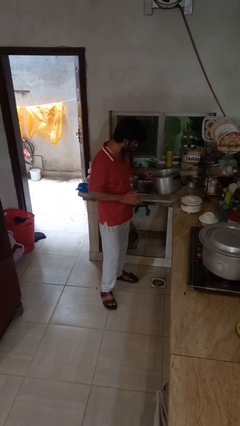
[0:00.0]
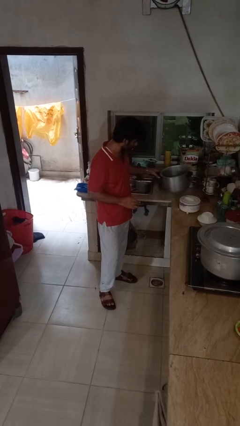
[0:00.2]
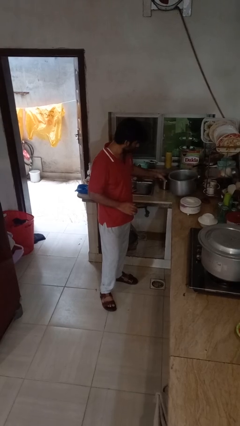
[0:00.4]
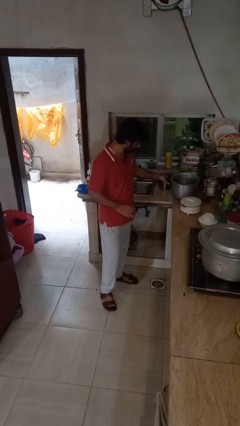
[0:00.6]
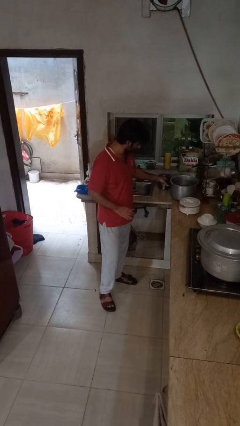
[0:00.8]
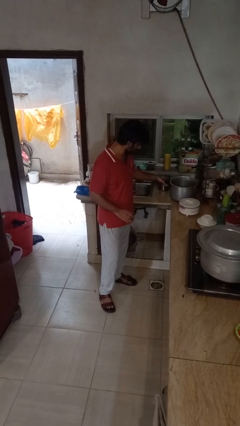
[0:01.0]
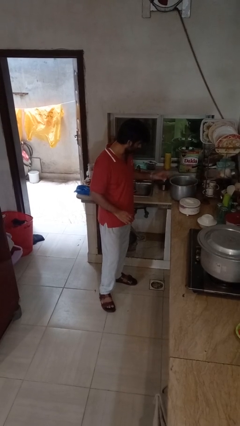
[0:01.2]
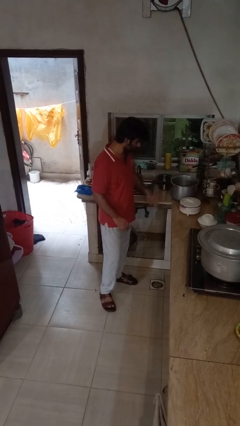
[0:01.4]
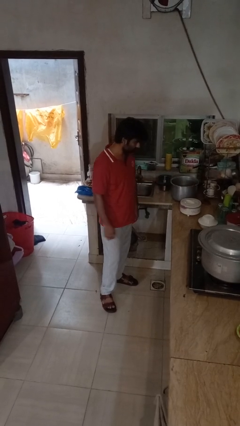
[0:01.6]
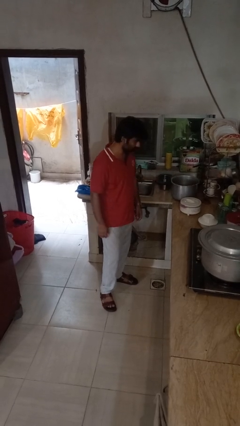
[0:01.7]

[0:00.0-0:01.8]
person puts down object on countertop

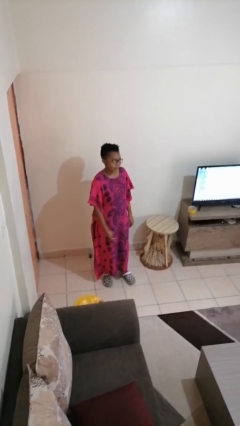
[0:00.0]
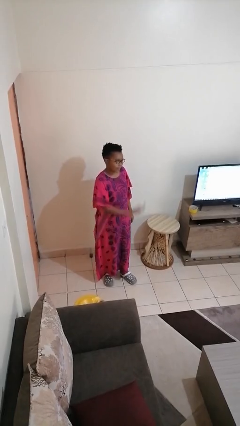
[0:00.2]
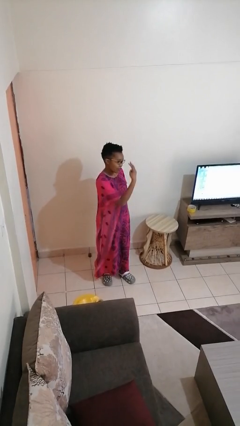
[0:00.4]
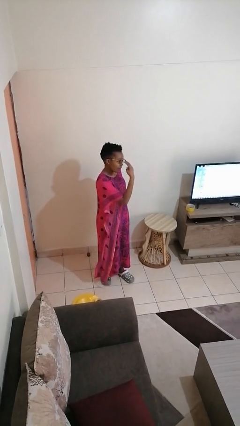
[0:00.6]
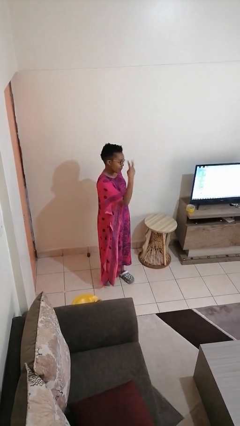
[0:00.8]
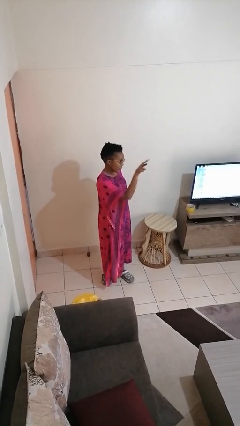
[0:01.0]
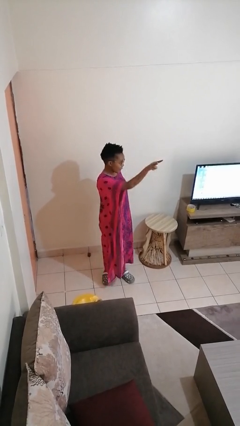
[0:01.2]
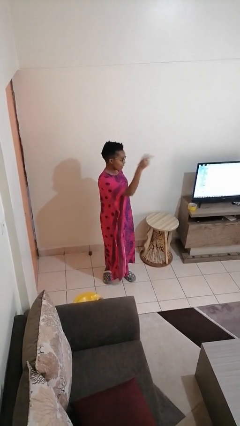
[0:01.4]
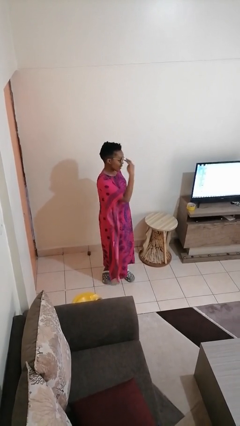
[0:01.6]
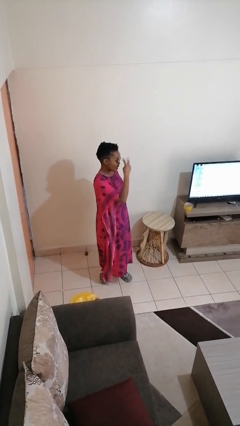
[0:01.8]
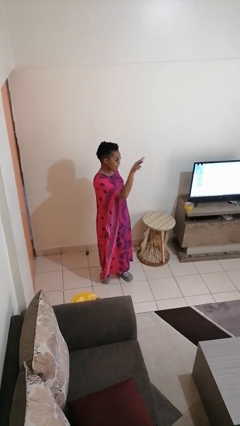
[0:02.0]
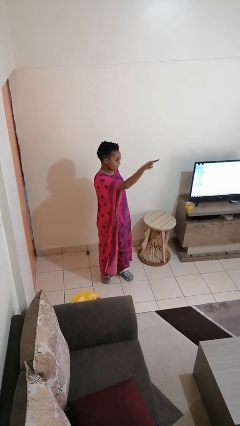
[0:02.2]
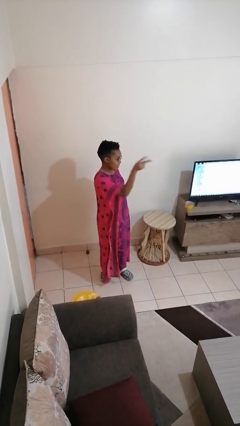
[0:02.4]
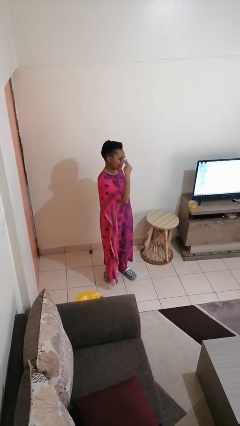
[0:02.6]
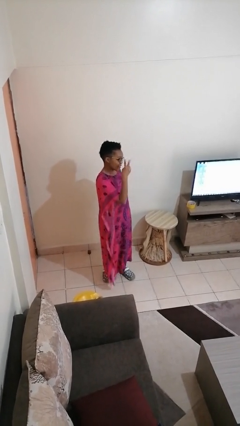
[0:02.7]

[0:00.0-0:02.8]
person gestures watch closely

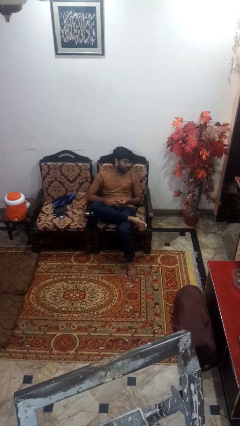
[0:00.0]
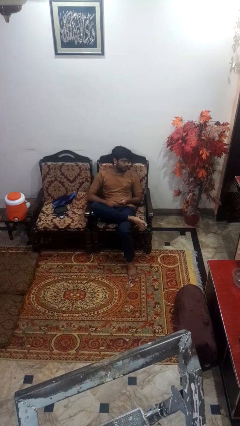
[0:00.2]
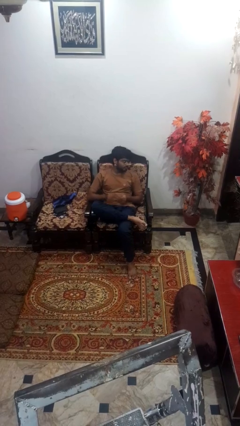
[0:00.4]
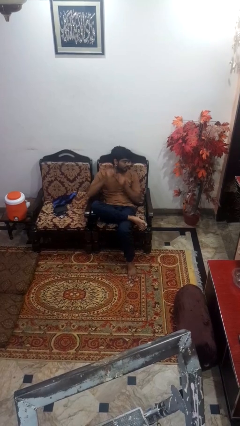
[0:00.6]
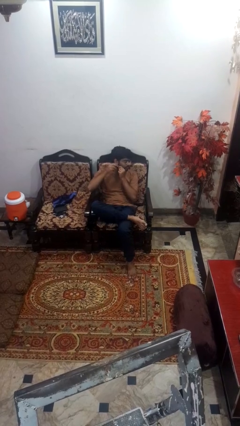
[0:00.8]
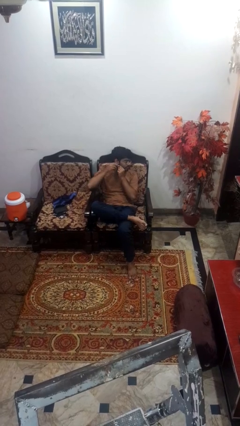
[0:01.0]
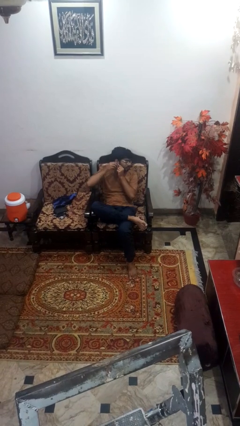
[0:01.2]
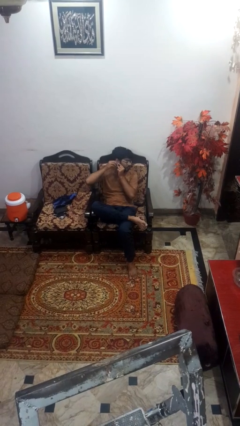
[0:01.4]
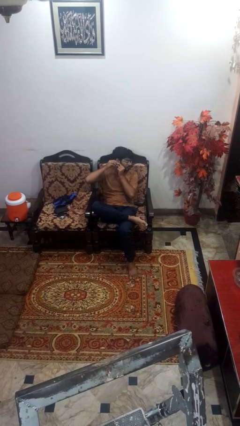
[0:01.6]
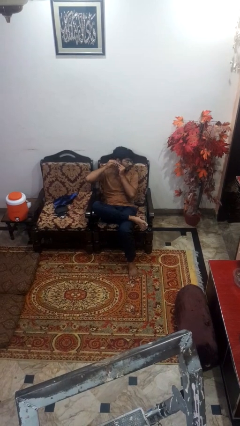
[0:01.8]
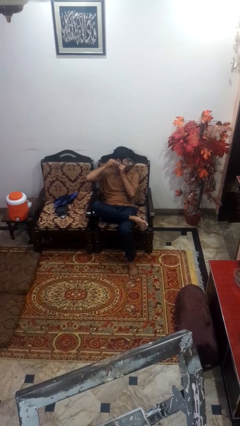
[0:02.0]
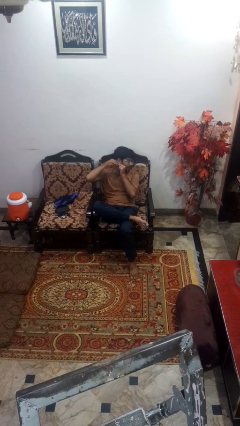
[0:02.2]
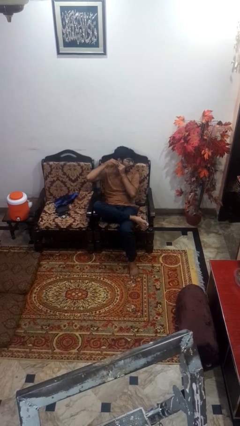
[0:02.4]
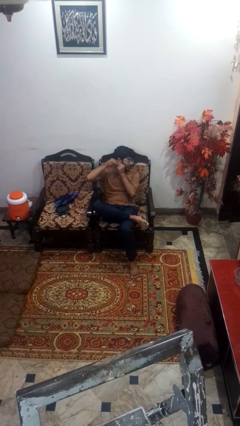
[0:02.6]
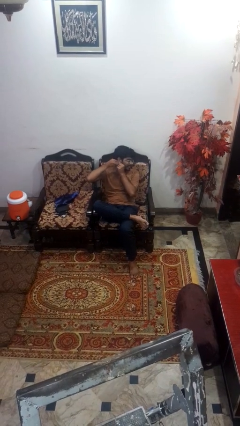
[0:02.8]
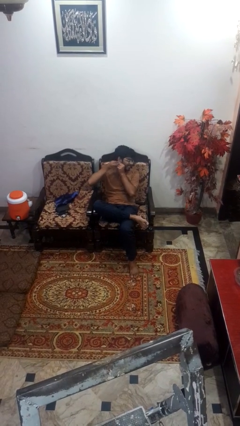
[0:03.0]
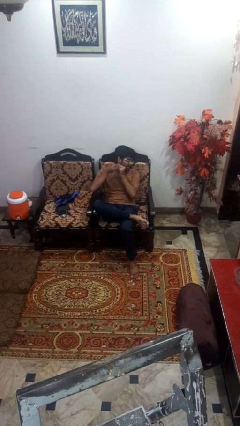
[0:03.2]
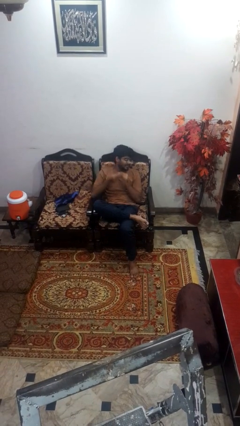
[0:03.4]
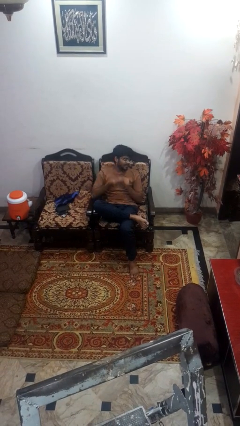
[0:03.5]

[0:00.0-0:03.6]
person takes off earrings

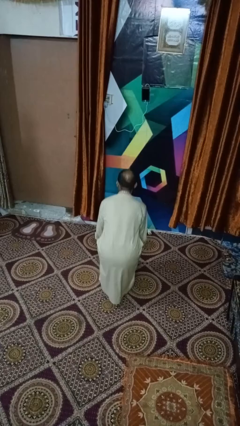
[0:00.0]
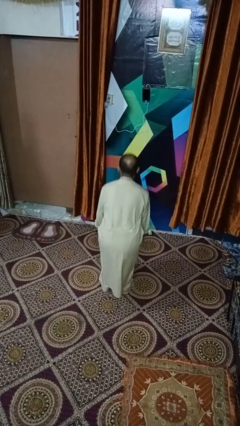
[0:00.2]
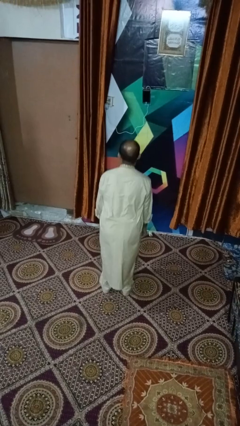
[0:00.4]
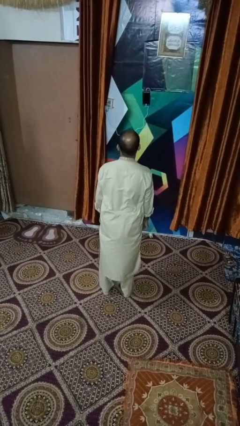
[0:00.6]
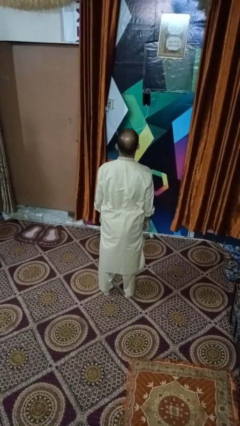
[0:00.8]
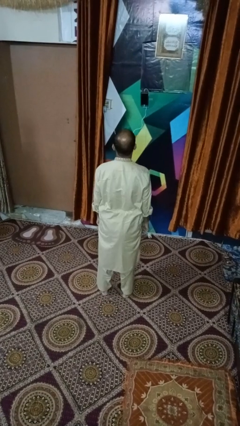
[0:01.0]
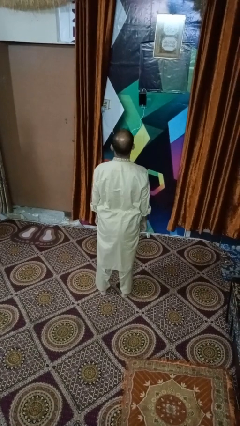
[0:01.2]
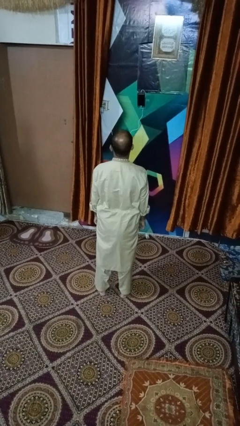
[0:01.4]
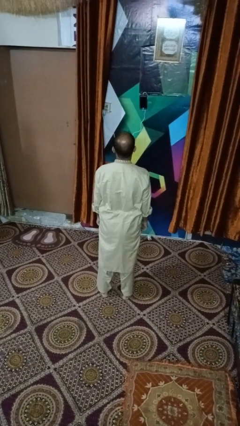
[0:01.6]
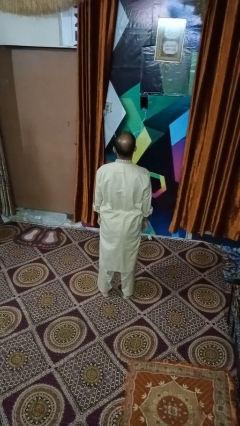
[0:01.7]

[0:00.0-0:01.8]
person stands up

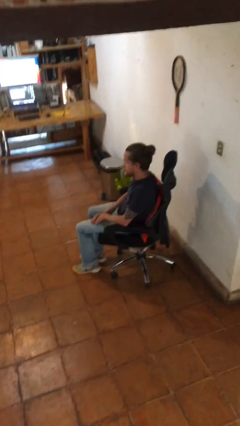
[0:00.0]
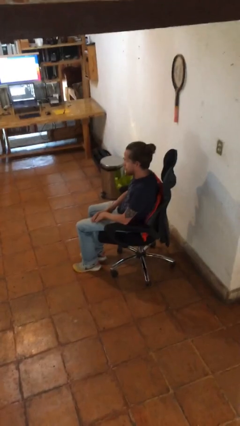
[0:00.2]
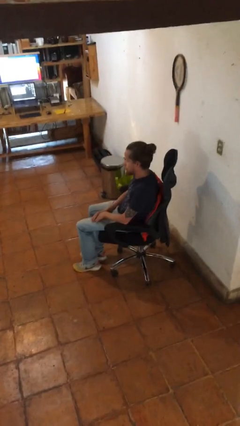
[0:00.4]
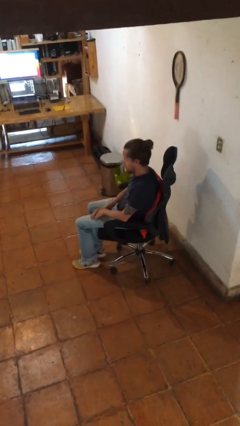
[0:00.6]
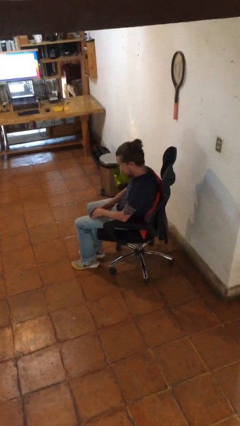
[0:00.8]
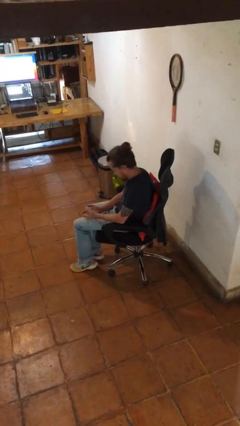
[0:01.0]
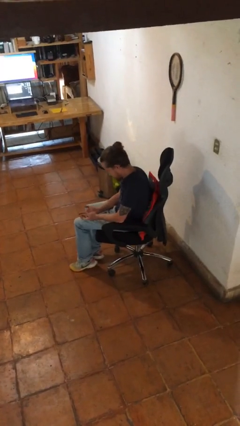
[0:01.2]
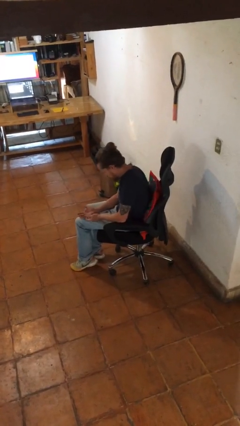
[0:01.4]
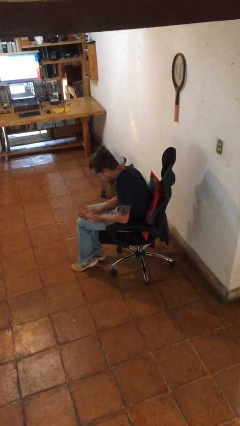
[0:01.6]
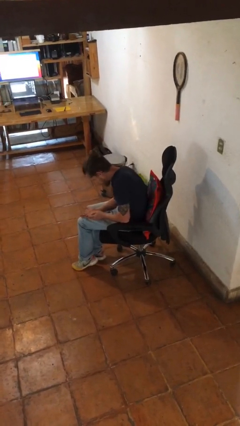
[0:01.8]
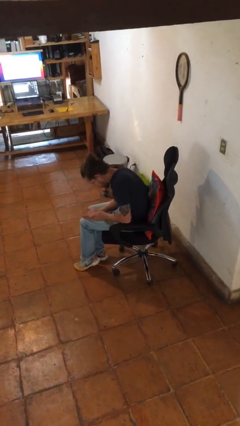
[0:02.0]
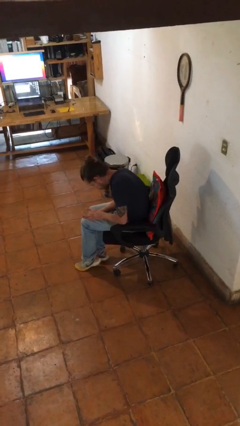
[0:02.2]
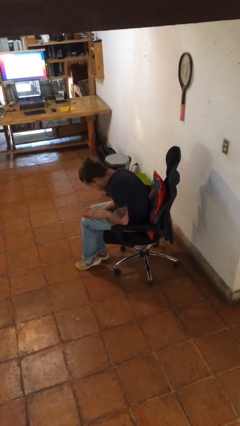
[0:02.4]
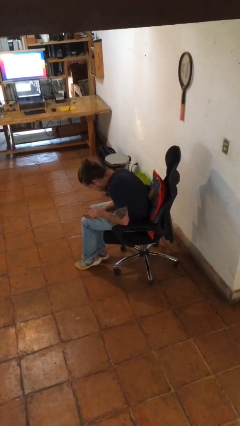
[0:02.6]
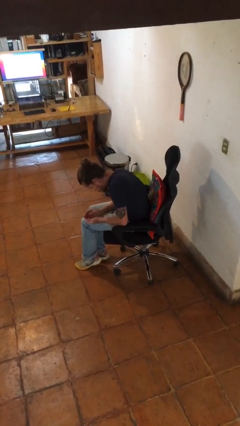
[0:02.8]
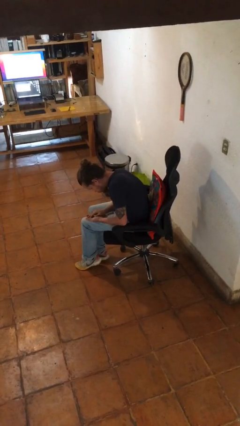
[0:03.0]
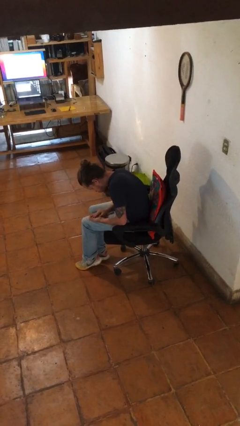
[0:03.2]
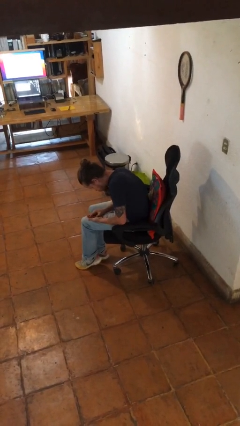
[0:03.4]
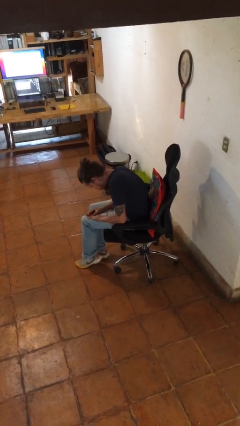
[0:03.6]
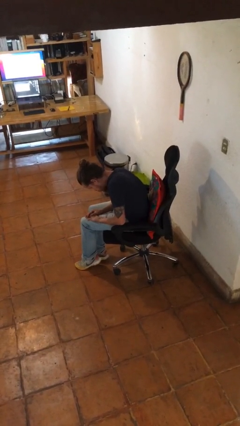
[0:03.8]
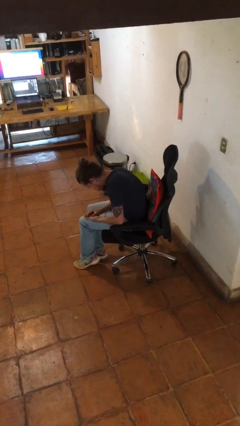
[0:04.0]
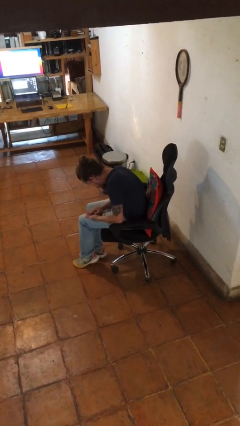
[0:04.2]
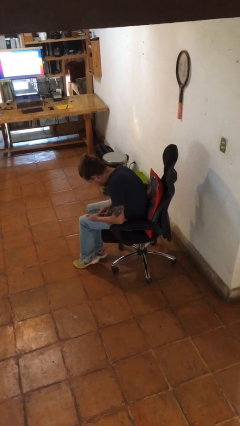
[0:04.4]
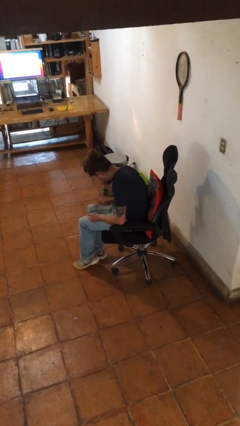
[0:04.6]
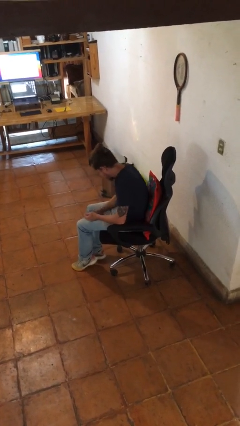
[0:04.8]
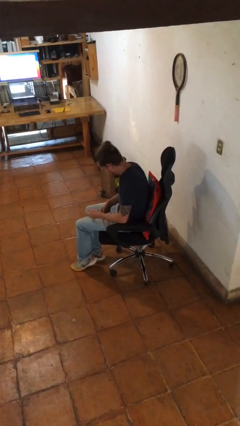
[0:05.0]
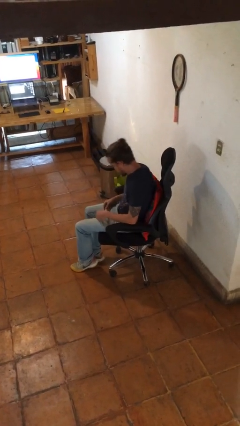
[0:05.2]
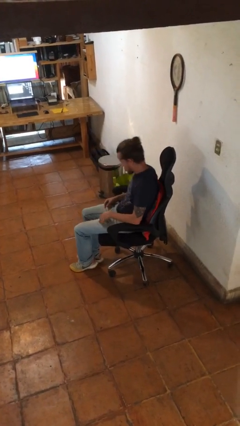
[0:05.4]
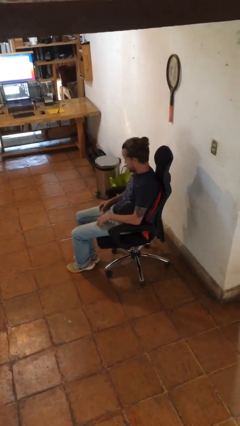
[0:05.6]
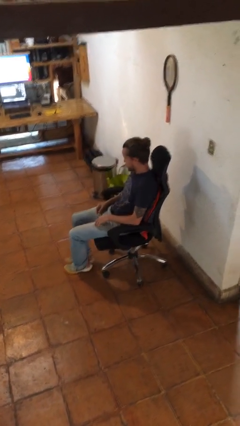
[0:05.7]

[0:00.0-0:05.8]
person looks at hands in lap

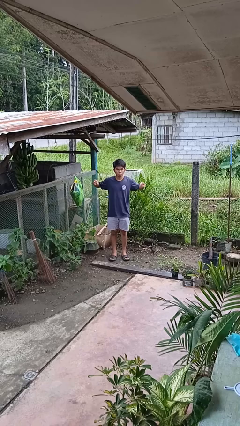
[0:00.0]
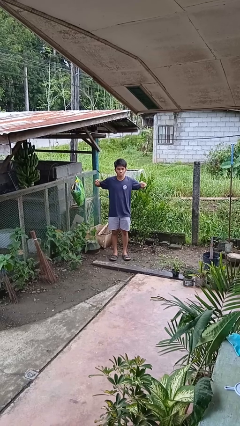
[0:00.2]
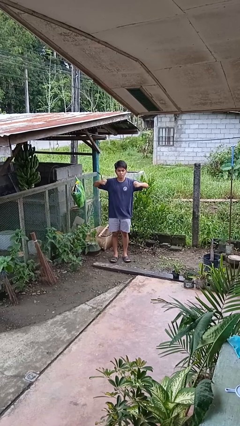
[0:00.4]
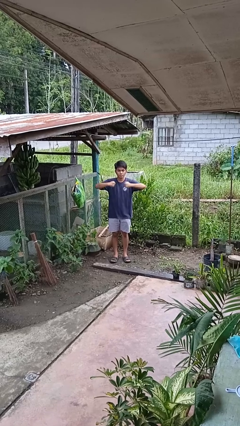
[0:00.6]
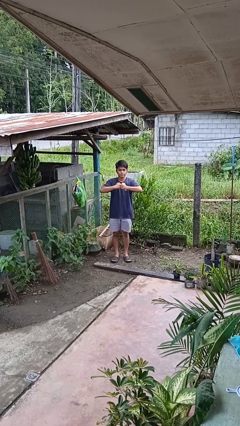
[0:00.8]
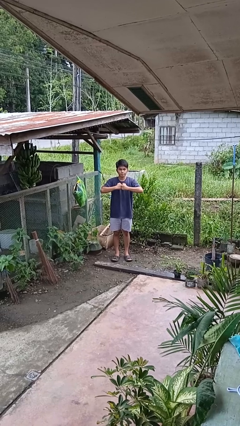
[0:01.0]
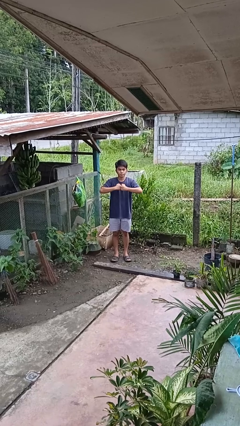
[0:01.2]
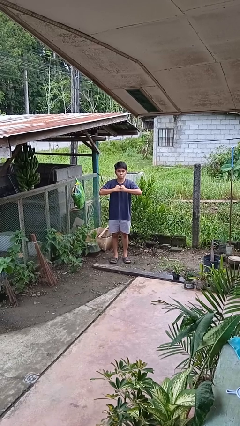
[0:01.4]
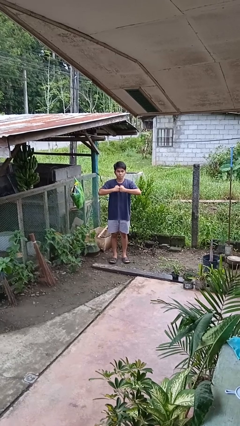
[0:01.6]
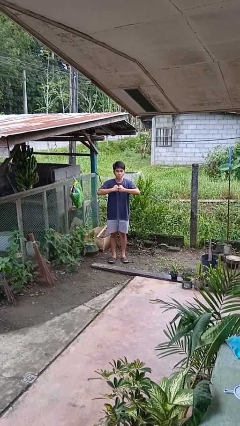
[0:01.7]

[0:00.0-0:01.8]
person gestures zoom out
